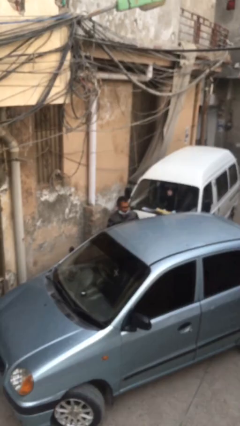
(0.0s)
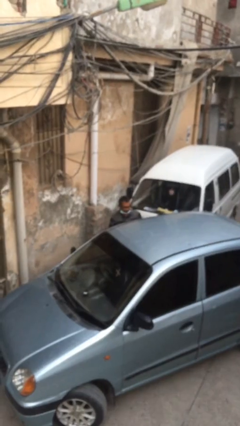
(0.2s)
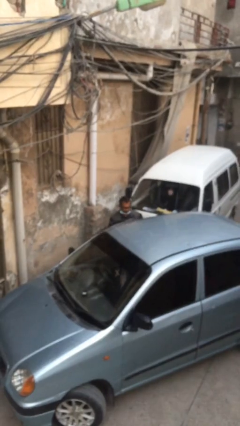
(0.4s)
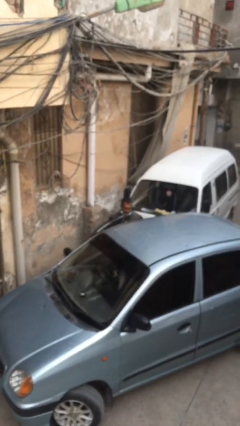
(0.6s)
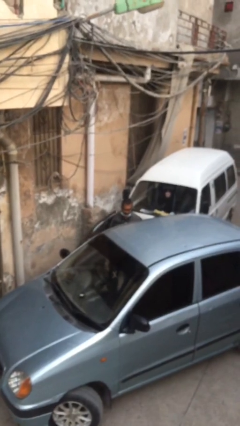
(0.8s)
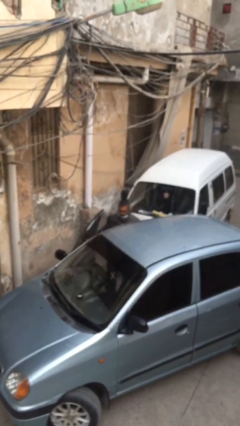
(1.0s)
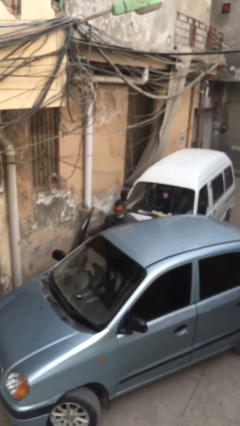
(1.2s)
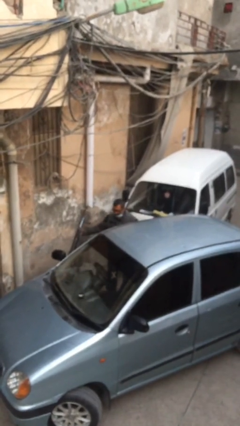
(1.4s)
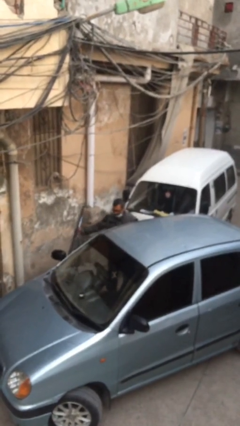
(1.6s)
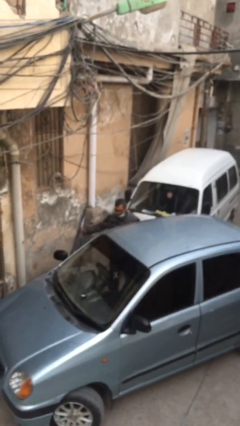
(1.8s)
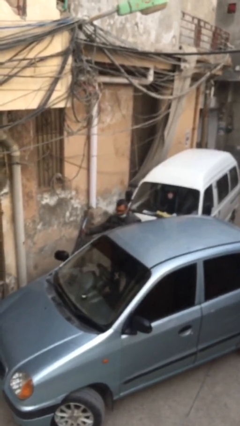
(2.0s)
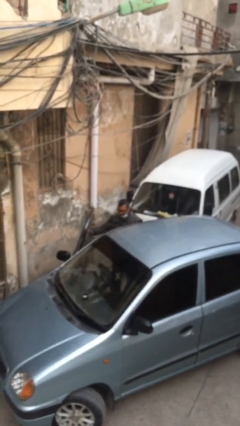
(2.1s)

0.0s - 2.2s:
person opens car door

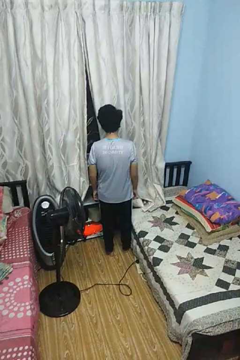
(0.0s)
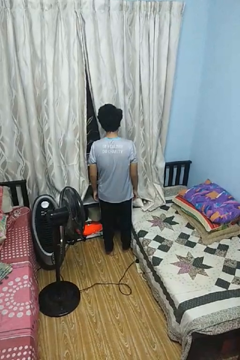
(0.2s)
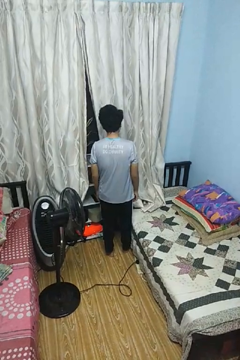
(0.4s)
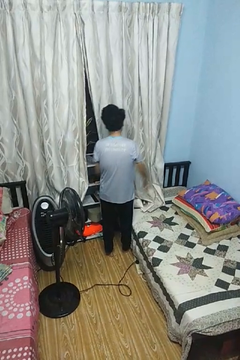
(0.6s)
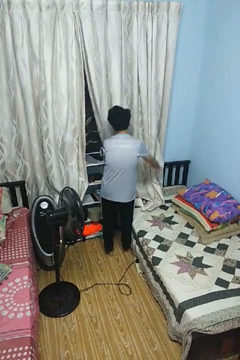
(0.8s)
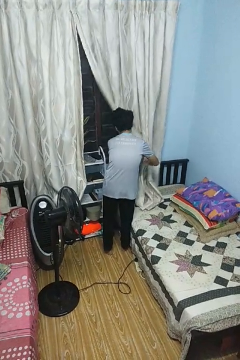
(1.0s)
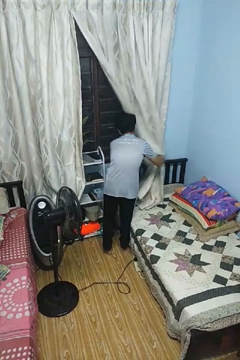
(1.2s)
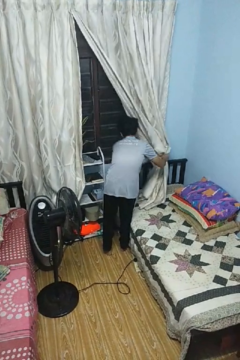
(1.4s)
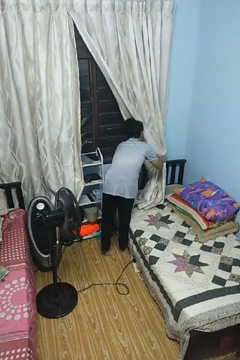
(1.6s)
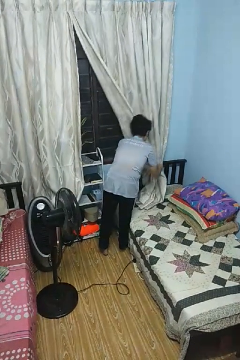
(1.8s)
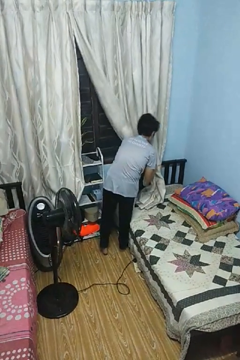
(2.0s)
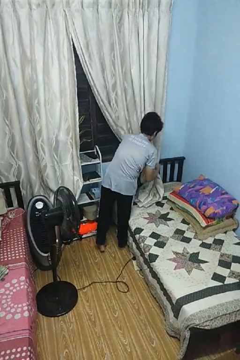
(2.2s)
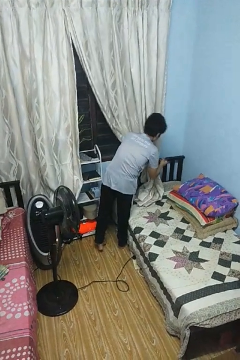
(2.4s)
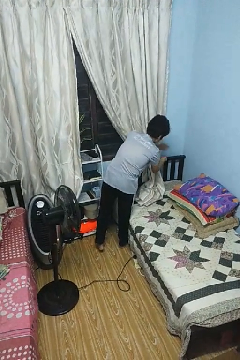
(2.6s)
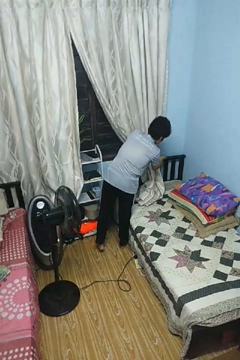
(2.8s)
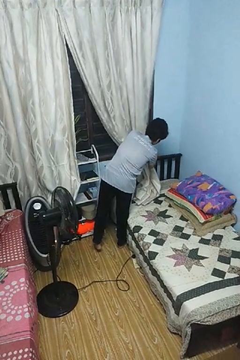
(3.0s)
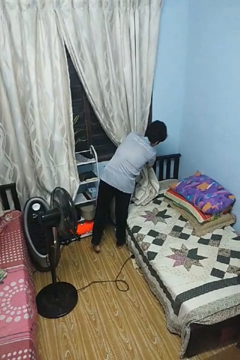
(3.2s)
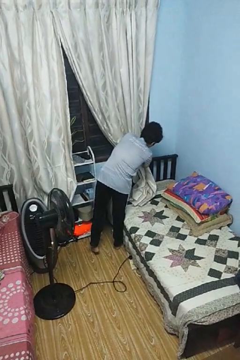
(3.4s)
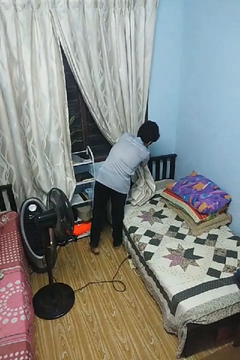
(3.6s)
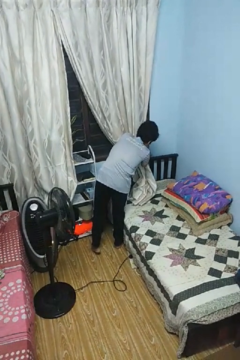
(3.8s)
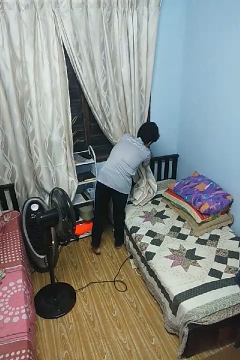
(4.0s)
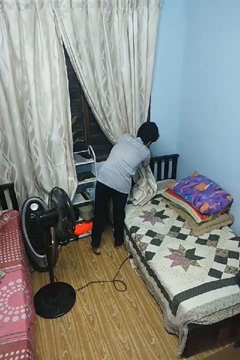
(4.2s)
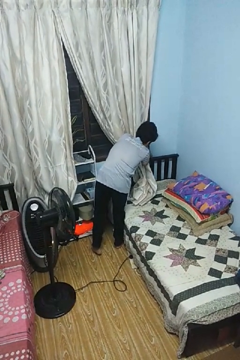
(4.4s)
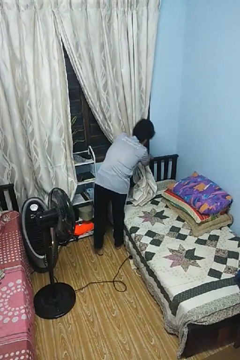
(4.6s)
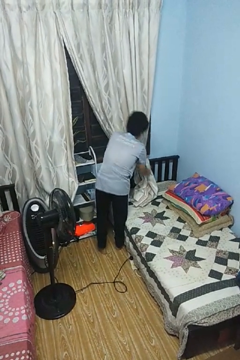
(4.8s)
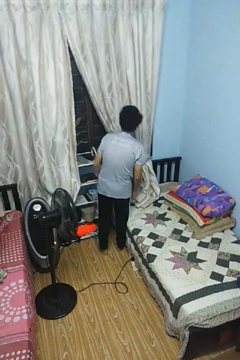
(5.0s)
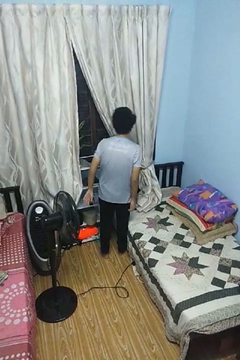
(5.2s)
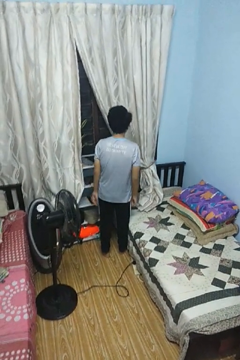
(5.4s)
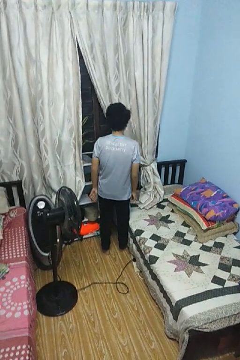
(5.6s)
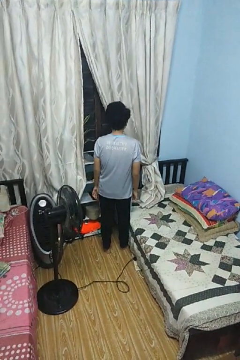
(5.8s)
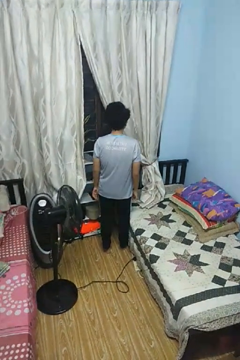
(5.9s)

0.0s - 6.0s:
person opens curtains

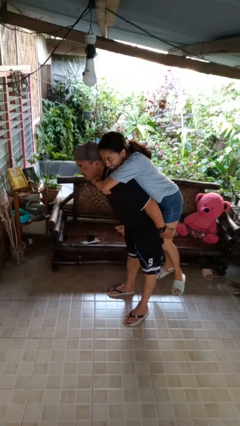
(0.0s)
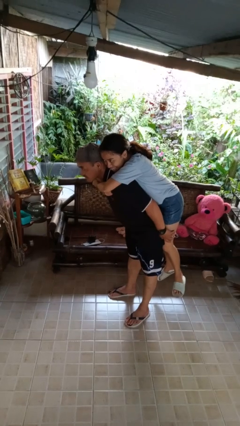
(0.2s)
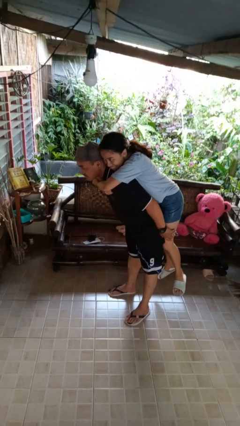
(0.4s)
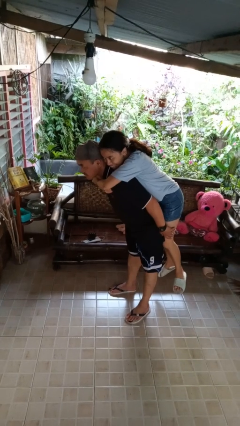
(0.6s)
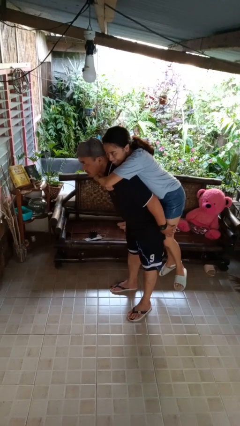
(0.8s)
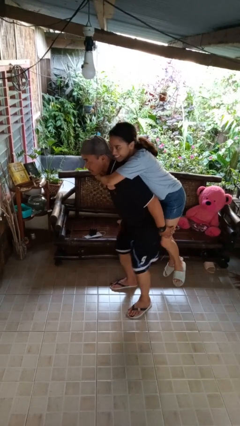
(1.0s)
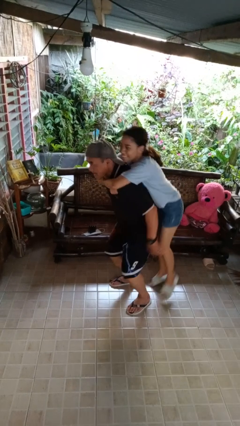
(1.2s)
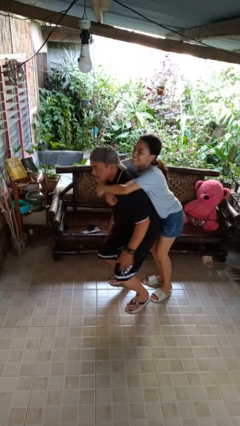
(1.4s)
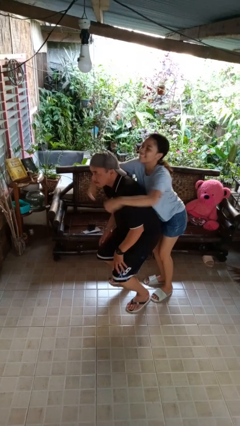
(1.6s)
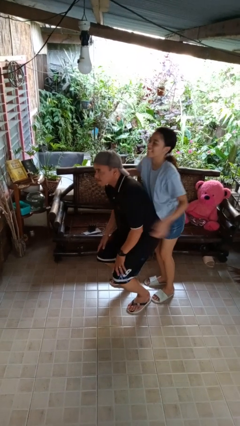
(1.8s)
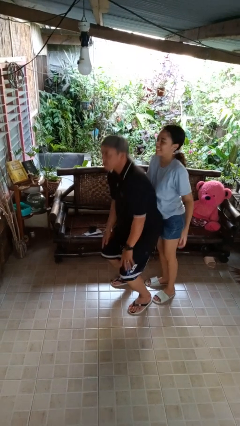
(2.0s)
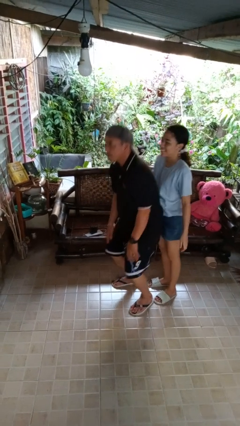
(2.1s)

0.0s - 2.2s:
person puts down person

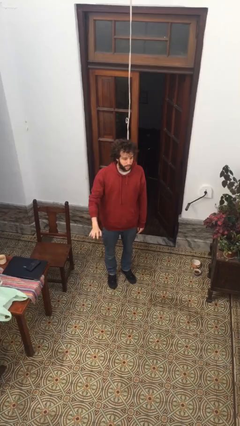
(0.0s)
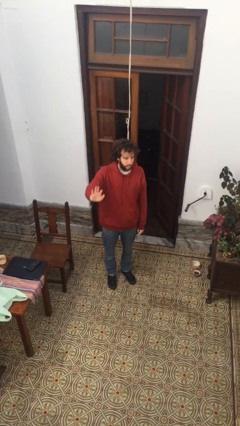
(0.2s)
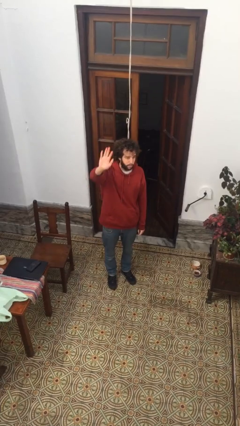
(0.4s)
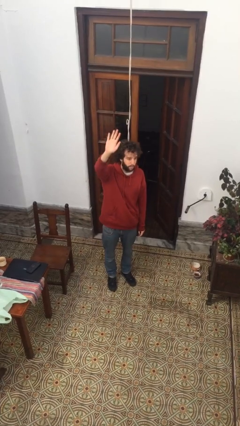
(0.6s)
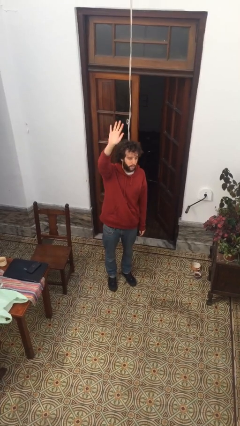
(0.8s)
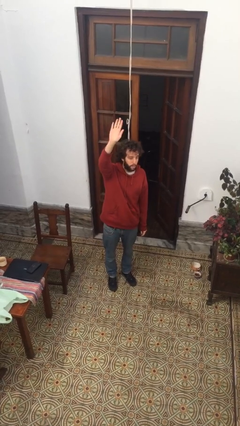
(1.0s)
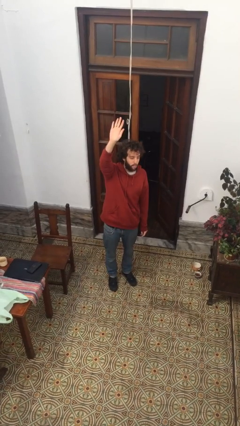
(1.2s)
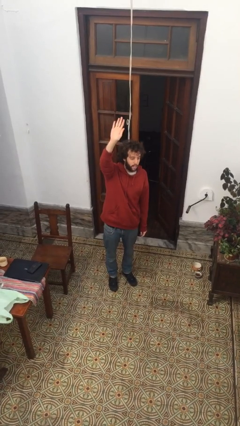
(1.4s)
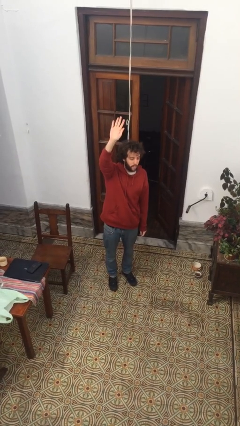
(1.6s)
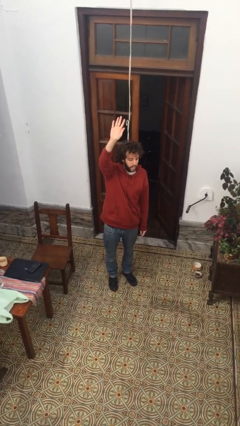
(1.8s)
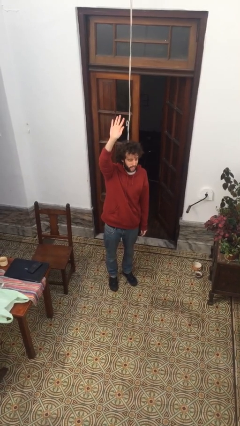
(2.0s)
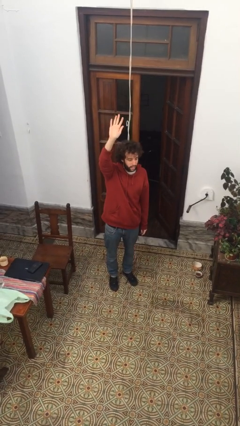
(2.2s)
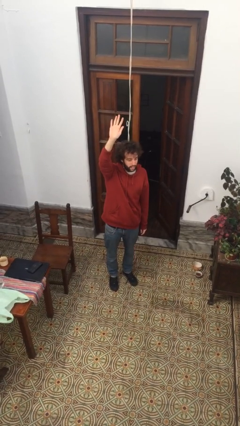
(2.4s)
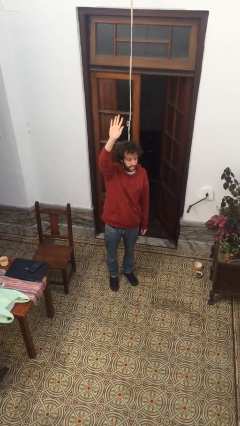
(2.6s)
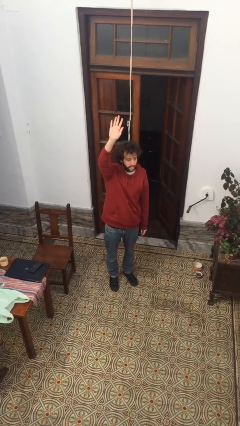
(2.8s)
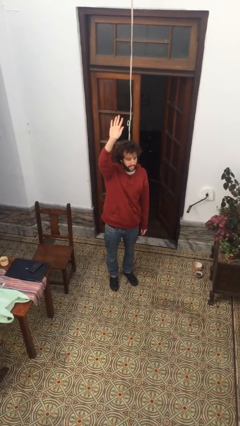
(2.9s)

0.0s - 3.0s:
person gestures raise hand

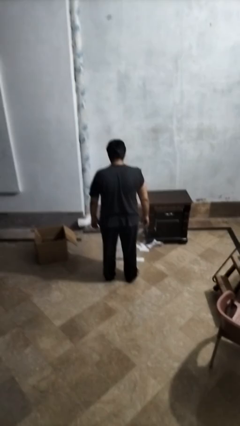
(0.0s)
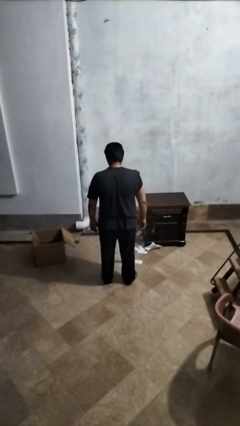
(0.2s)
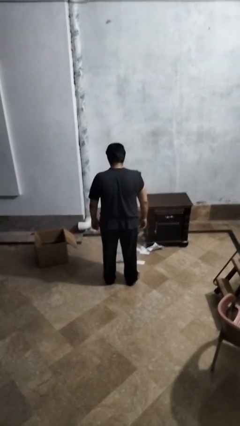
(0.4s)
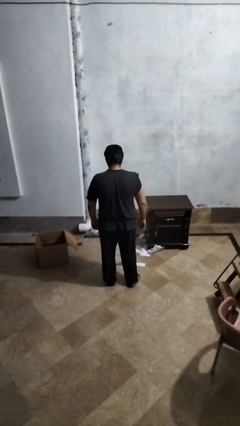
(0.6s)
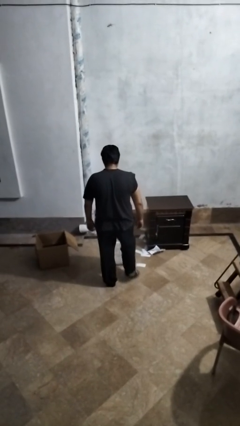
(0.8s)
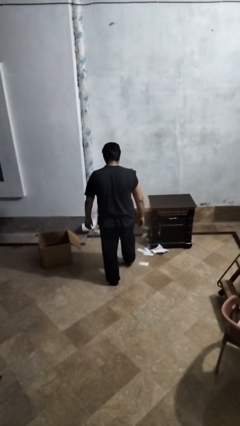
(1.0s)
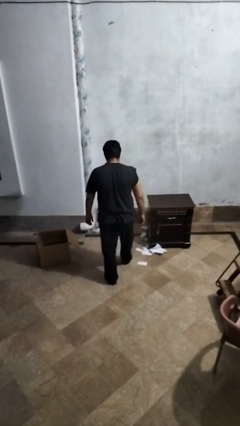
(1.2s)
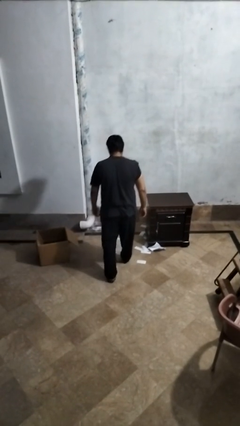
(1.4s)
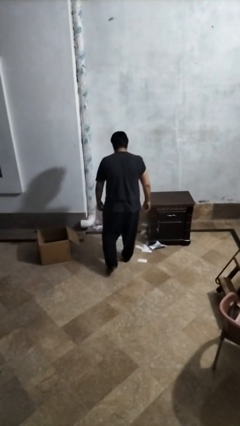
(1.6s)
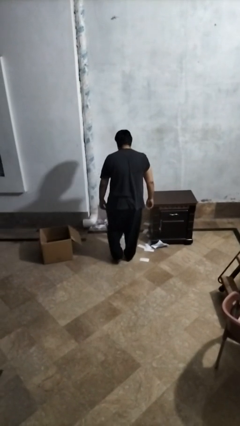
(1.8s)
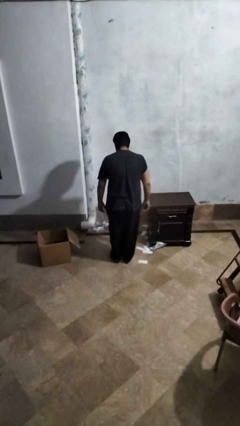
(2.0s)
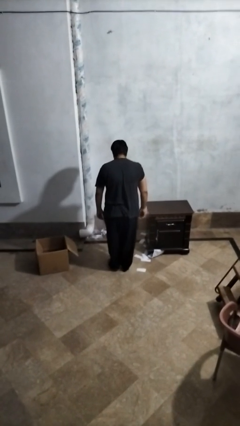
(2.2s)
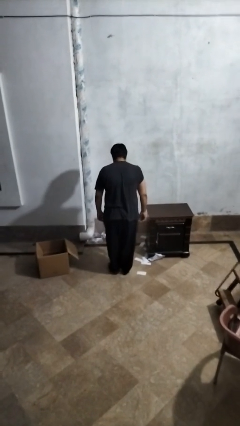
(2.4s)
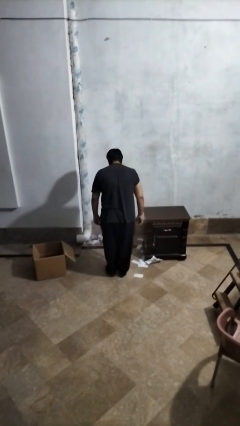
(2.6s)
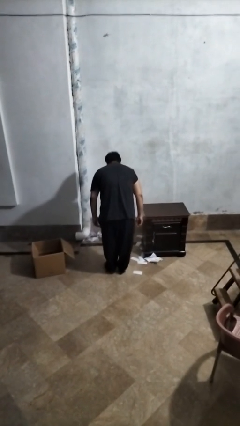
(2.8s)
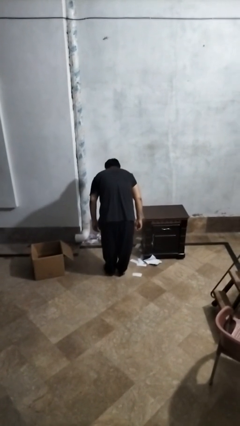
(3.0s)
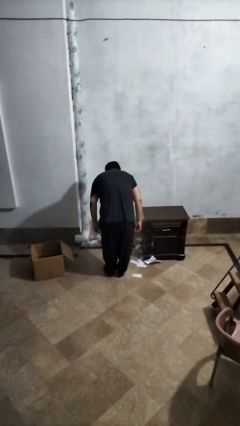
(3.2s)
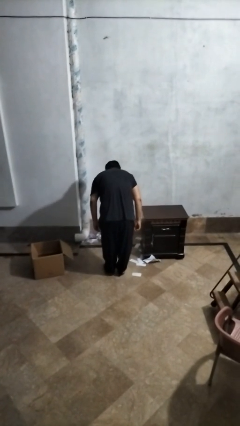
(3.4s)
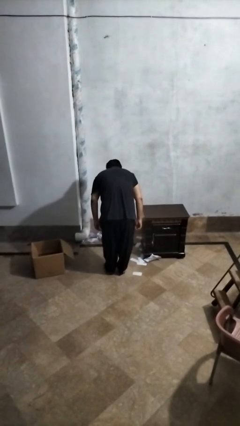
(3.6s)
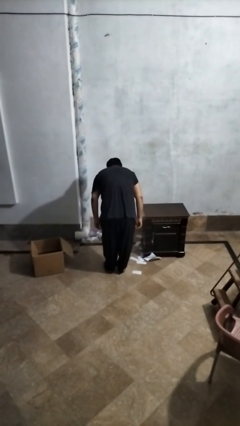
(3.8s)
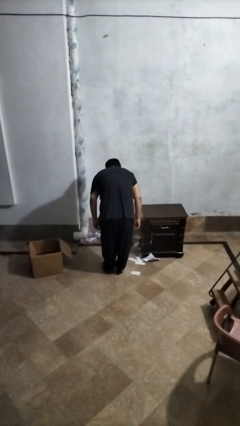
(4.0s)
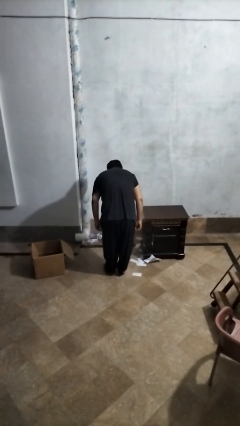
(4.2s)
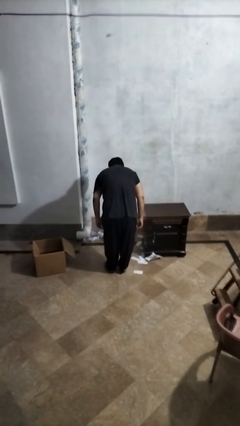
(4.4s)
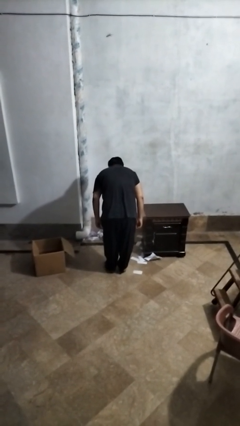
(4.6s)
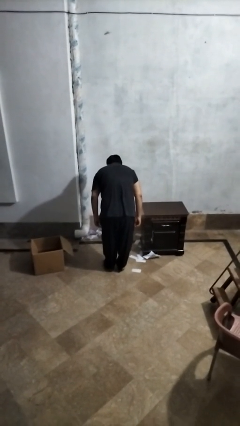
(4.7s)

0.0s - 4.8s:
person uses bodyweight scale

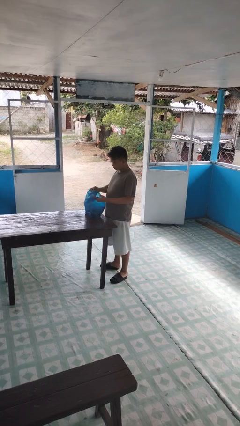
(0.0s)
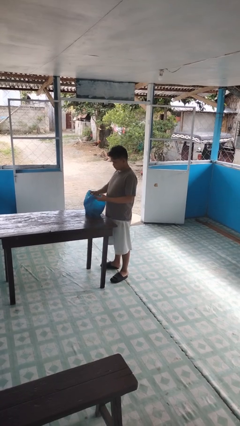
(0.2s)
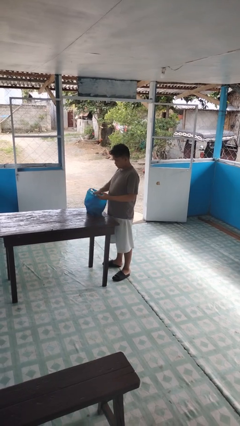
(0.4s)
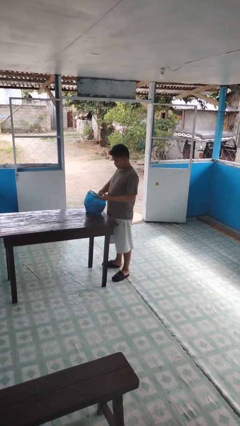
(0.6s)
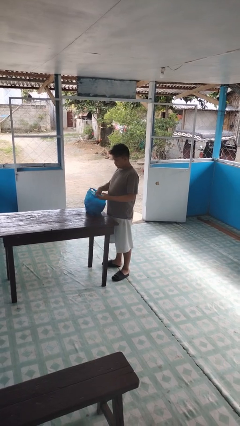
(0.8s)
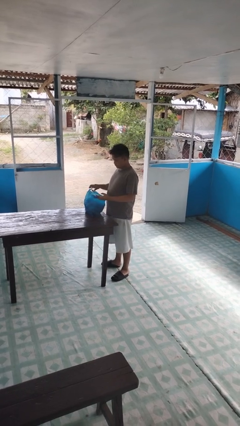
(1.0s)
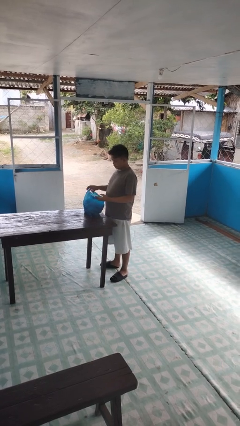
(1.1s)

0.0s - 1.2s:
person puts object into bag
